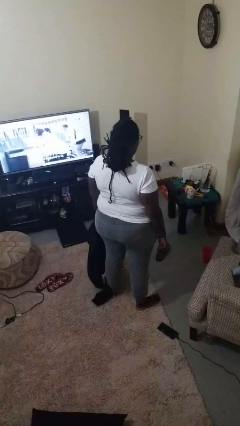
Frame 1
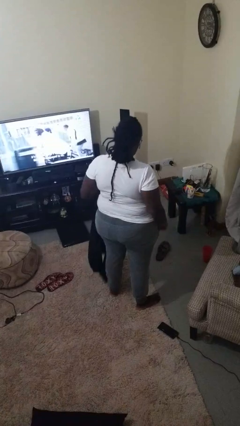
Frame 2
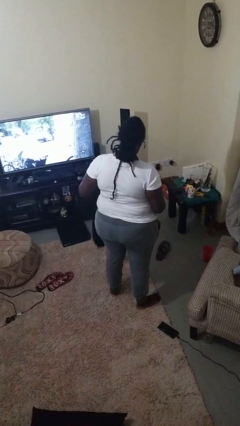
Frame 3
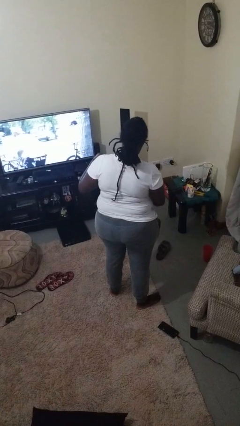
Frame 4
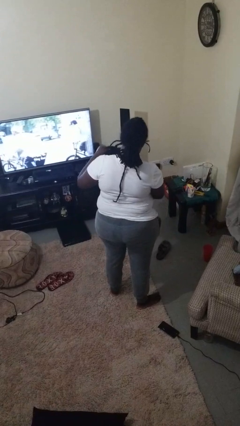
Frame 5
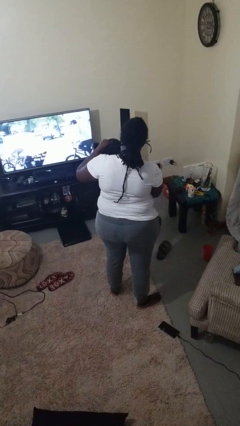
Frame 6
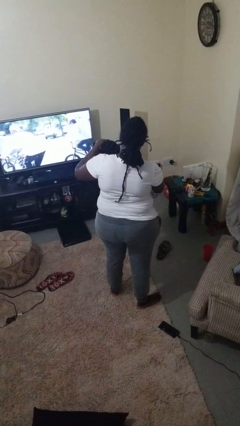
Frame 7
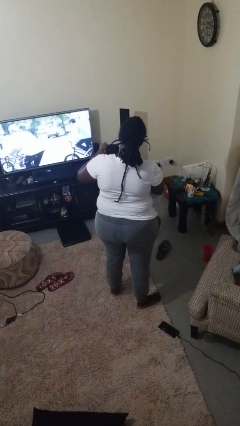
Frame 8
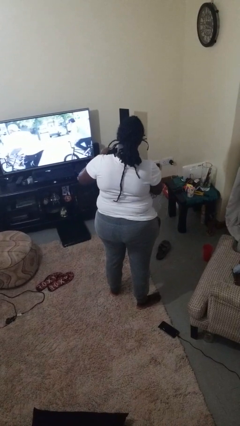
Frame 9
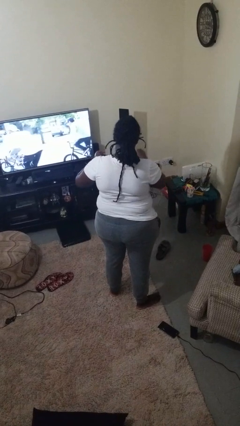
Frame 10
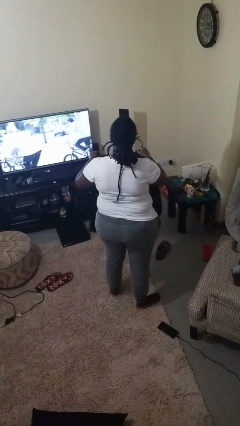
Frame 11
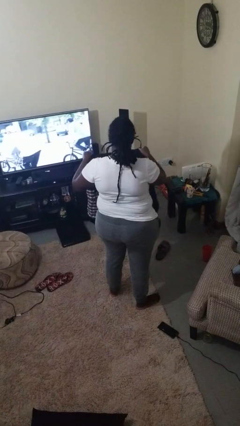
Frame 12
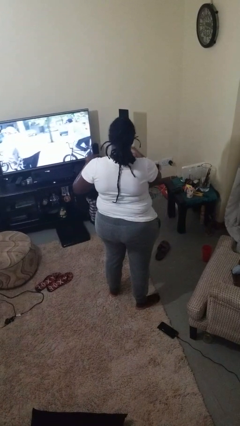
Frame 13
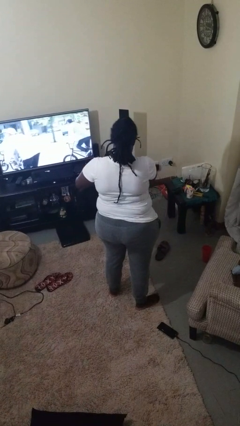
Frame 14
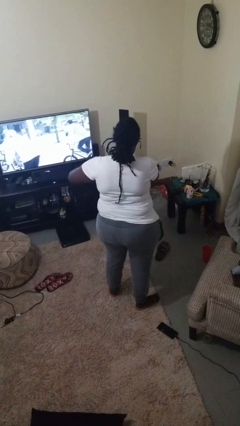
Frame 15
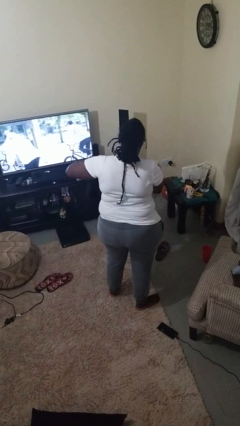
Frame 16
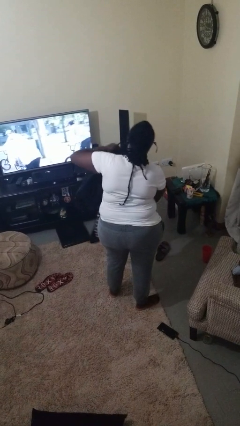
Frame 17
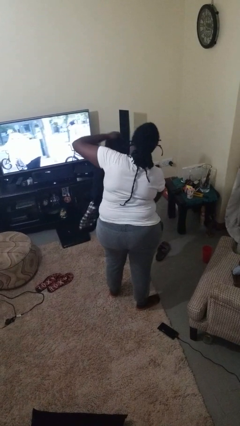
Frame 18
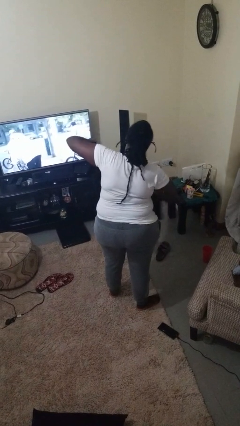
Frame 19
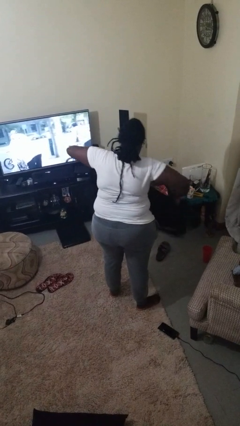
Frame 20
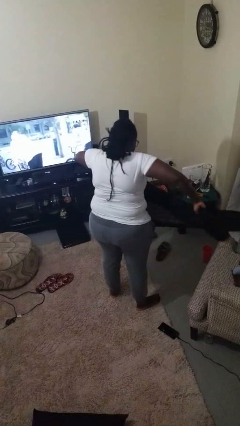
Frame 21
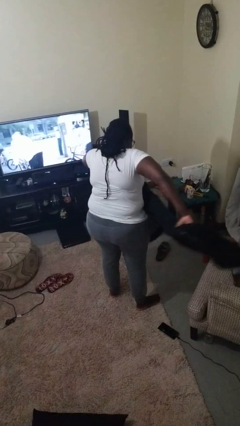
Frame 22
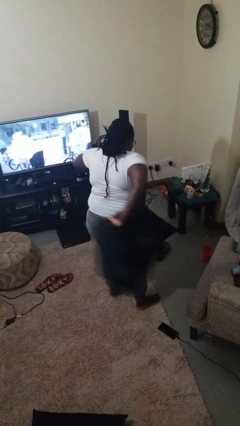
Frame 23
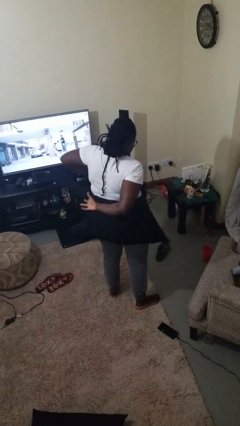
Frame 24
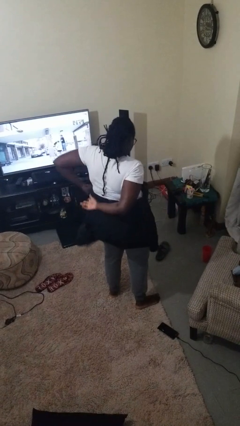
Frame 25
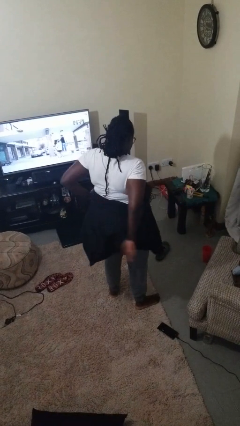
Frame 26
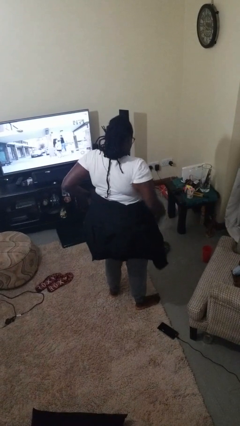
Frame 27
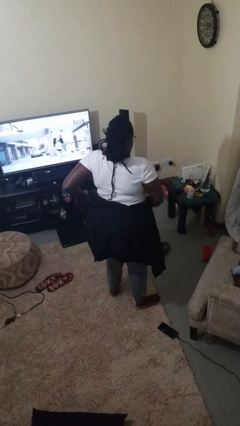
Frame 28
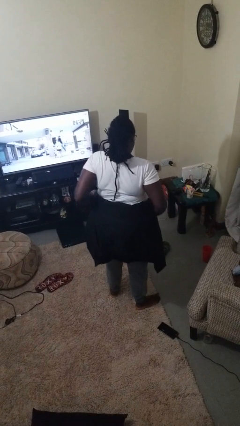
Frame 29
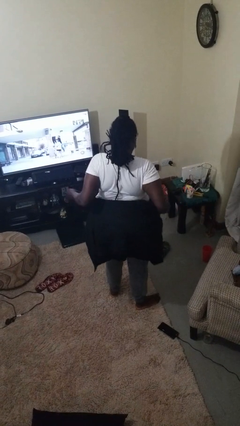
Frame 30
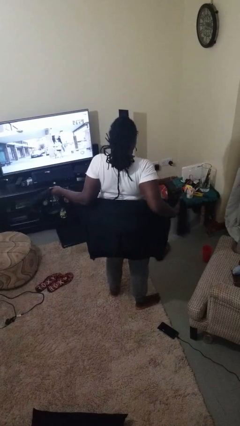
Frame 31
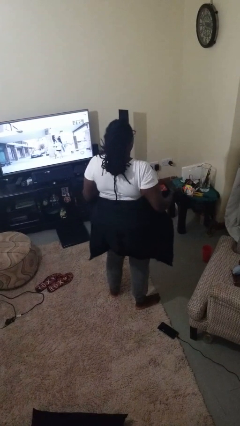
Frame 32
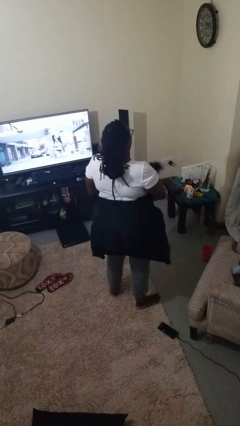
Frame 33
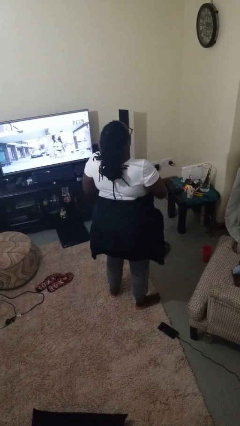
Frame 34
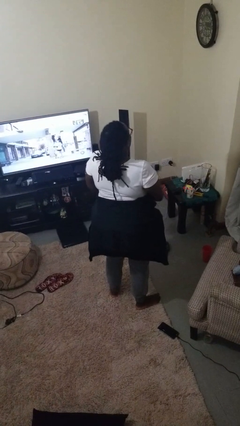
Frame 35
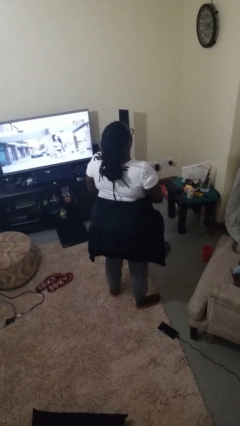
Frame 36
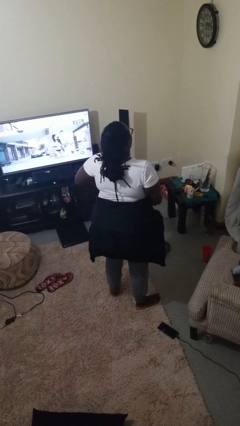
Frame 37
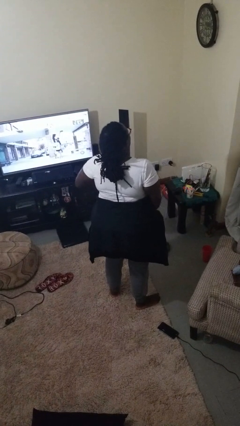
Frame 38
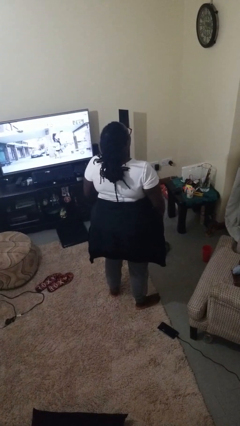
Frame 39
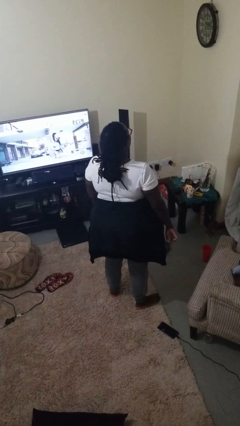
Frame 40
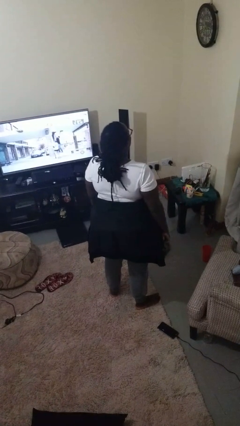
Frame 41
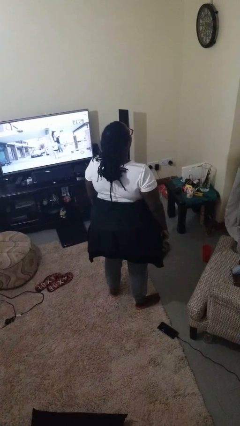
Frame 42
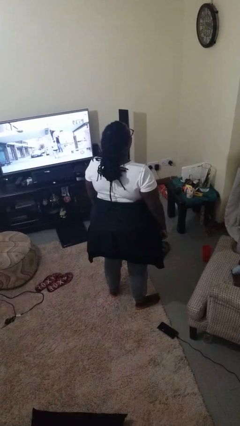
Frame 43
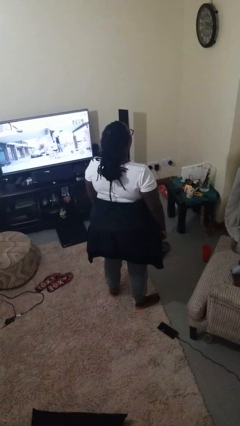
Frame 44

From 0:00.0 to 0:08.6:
person ties jacket around waist

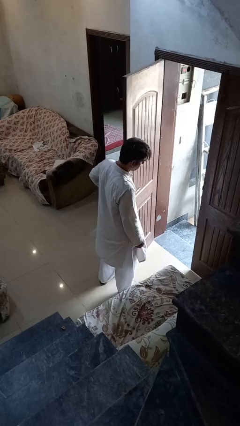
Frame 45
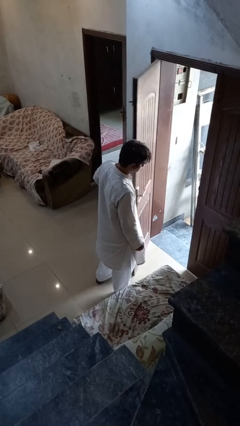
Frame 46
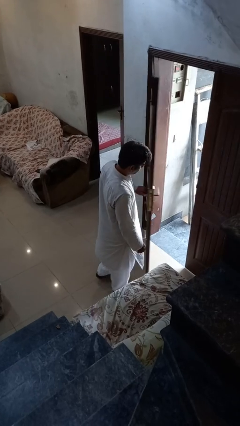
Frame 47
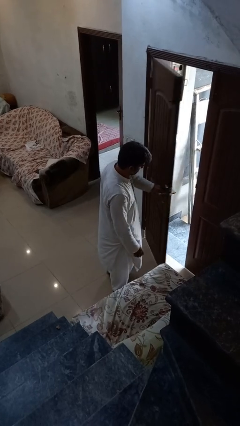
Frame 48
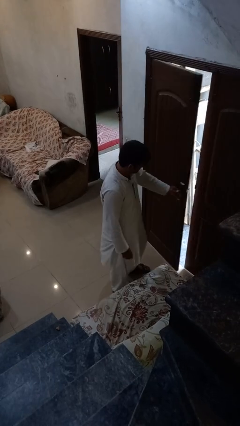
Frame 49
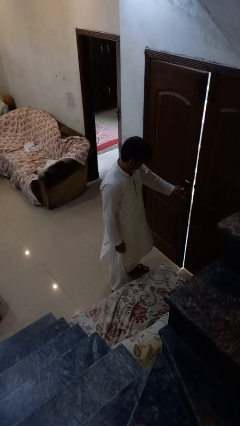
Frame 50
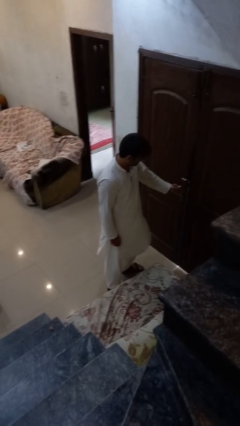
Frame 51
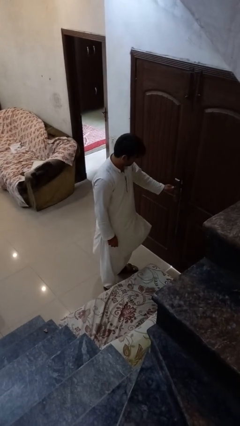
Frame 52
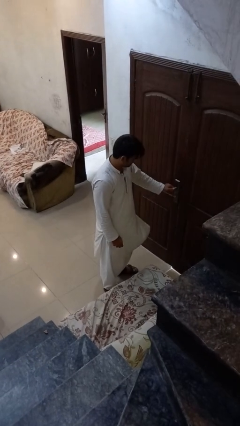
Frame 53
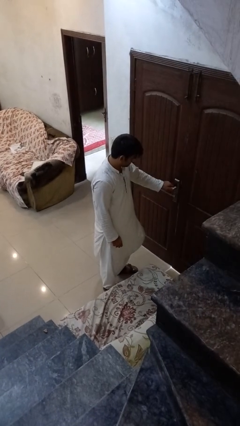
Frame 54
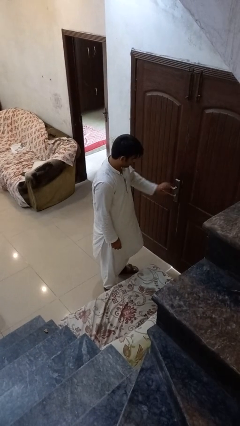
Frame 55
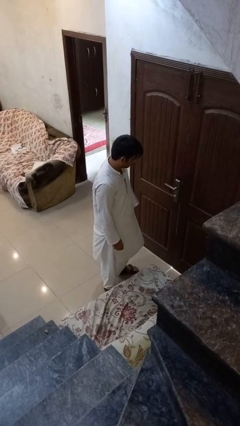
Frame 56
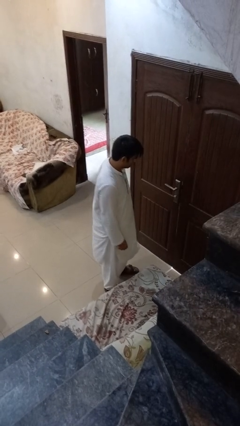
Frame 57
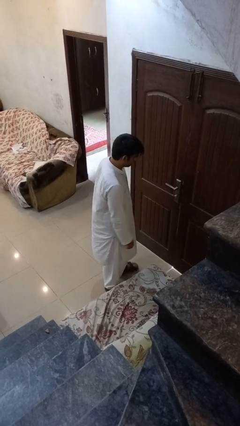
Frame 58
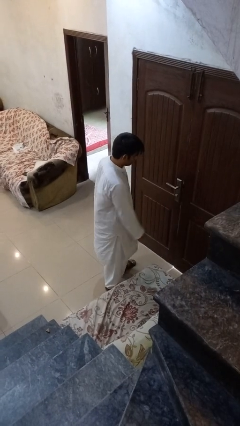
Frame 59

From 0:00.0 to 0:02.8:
person closes facility door

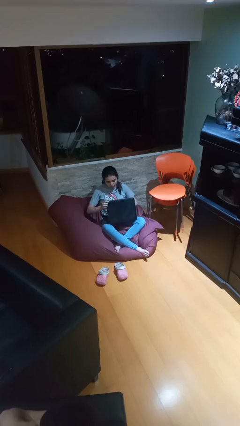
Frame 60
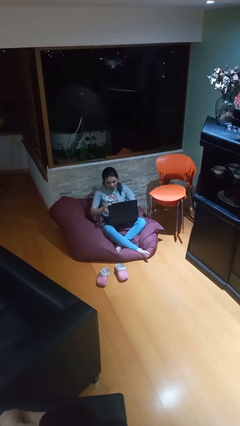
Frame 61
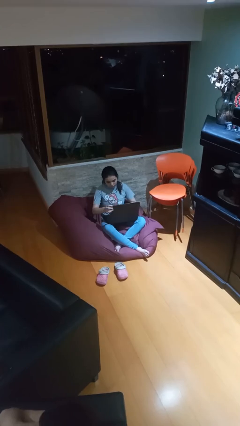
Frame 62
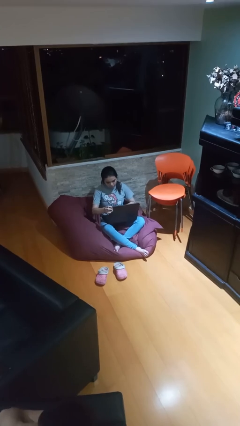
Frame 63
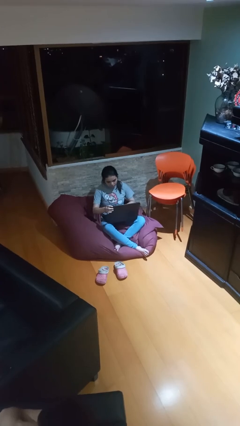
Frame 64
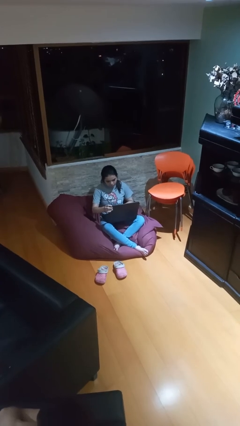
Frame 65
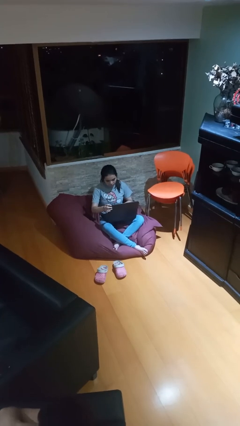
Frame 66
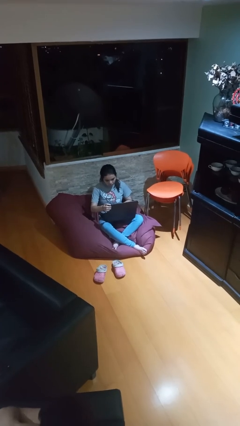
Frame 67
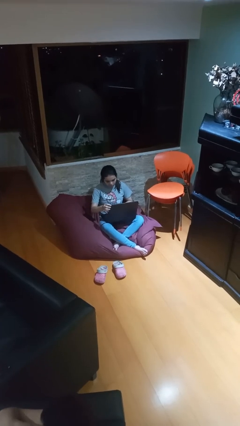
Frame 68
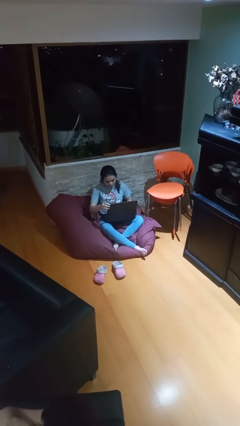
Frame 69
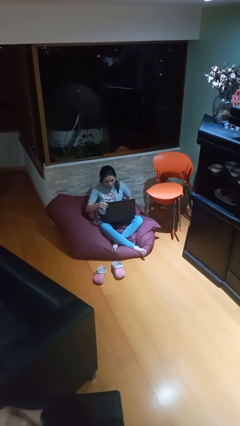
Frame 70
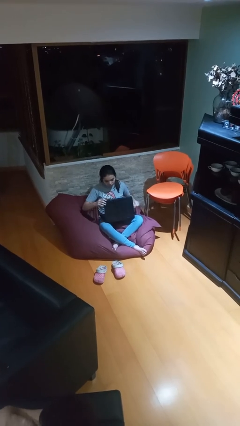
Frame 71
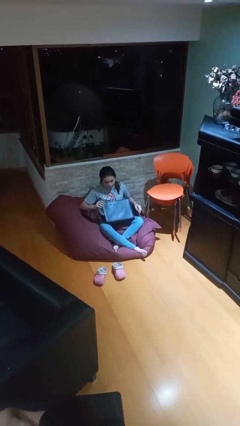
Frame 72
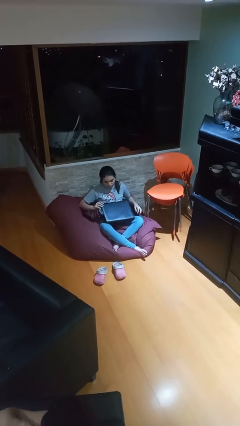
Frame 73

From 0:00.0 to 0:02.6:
person interacts with laptop

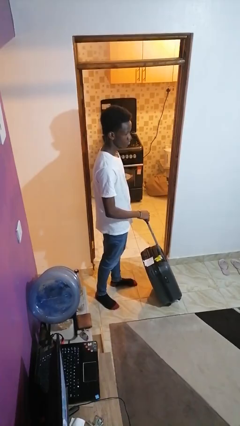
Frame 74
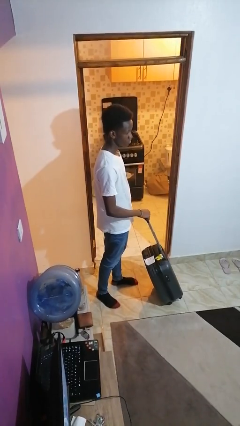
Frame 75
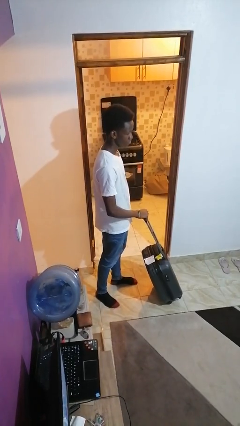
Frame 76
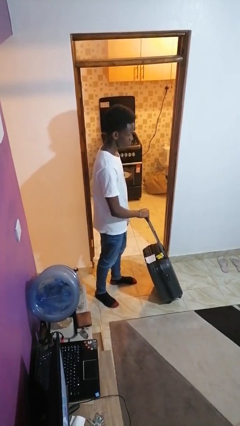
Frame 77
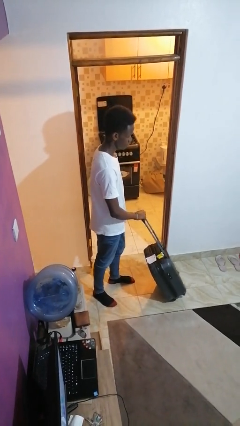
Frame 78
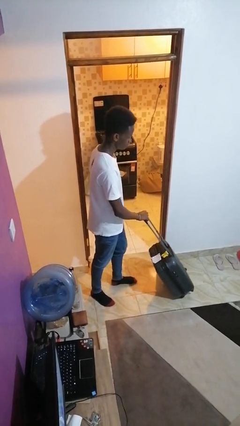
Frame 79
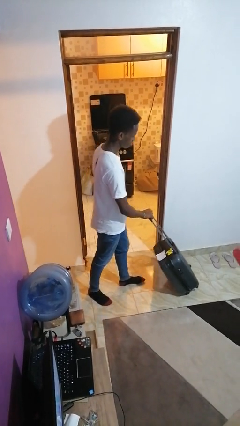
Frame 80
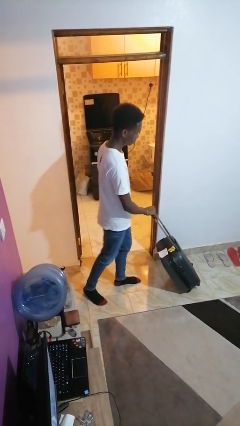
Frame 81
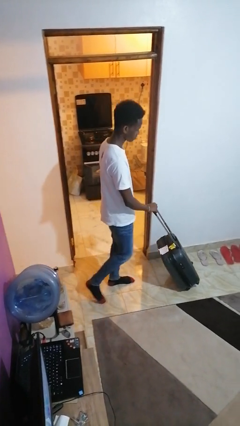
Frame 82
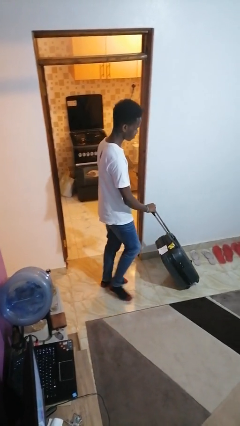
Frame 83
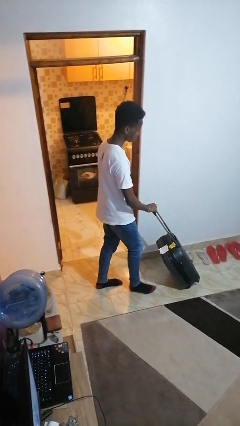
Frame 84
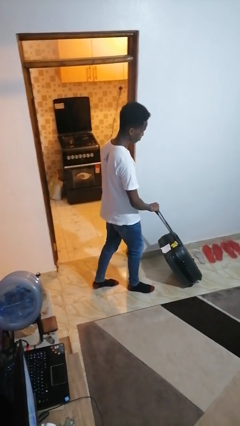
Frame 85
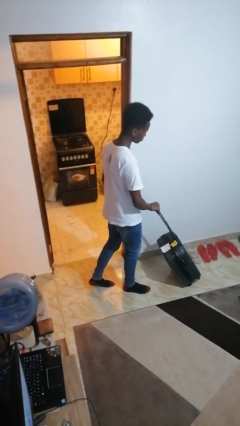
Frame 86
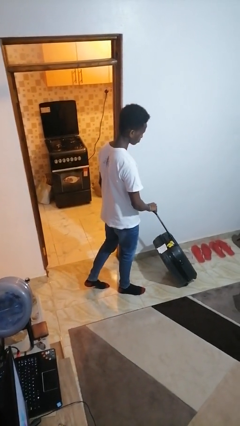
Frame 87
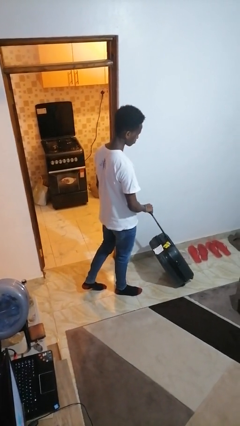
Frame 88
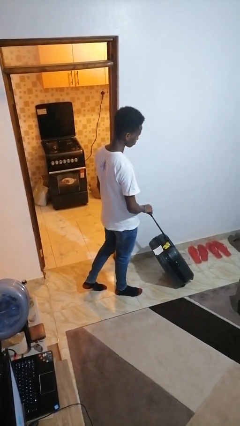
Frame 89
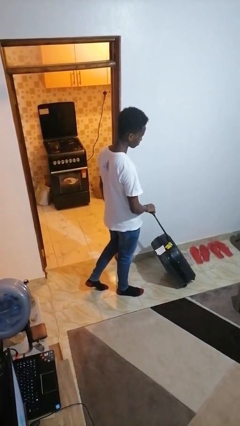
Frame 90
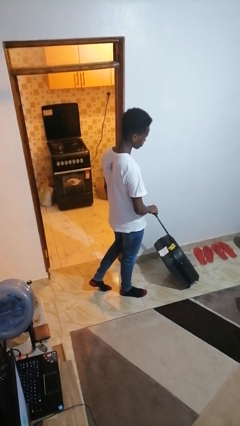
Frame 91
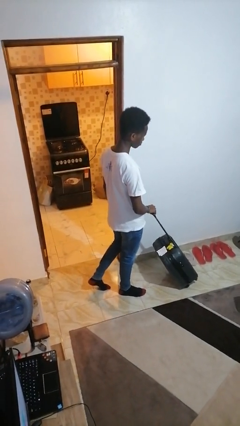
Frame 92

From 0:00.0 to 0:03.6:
person pushes wheeled cart
